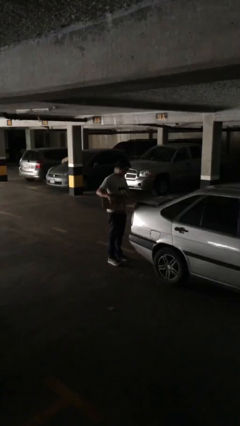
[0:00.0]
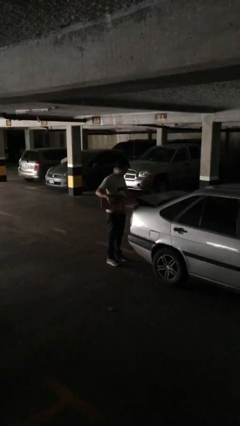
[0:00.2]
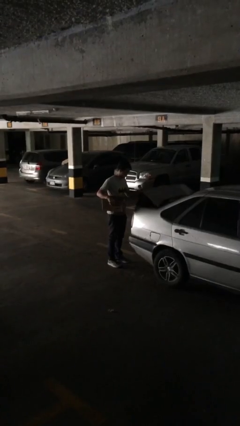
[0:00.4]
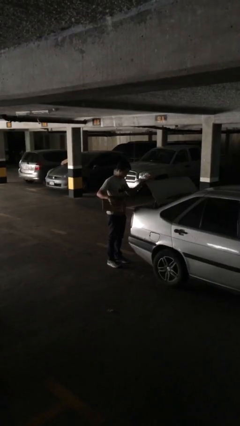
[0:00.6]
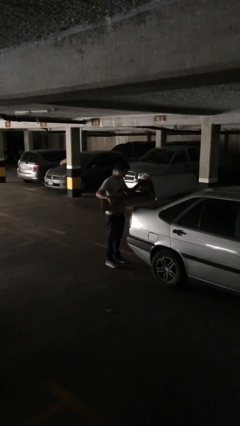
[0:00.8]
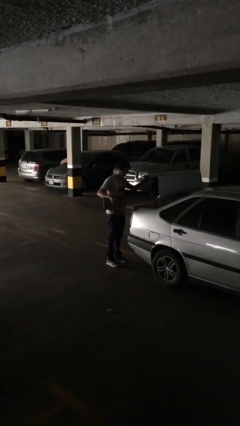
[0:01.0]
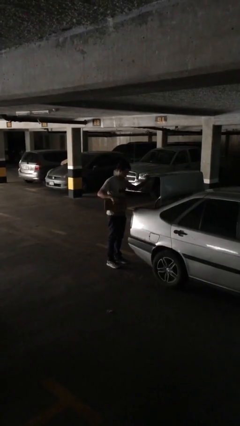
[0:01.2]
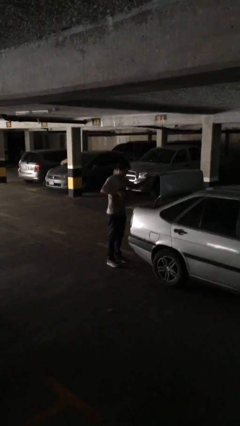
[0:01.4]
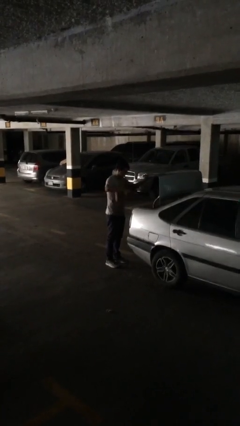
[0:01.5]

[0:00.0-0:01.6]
person opens car trunk

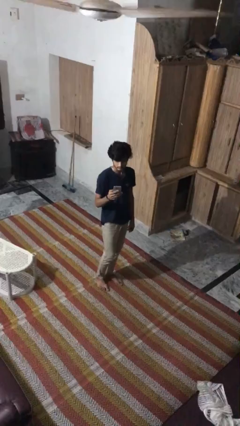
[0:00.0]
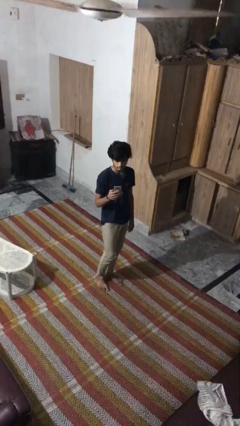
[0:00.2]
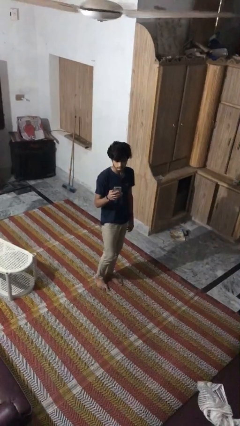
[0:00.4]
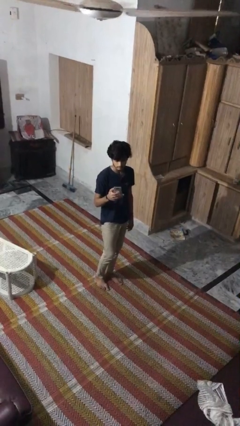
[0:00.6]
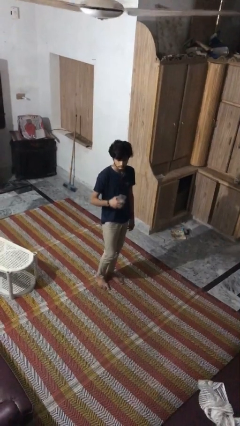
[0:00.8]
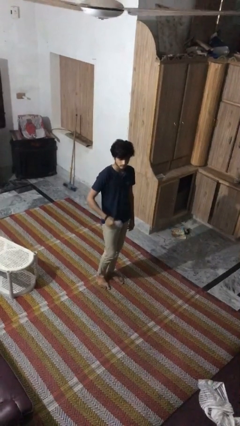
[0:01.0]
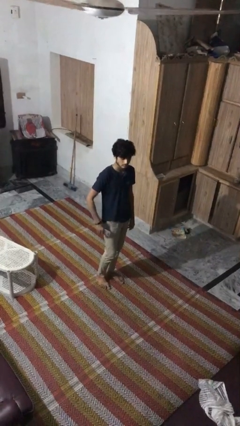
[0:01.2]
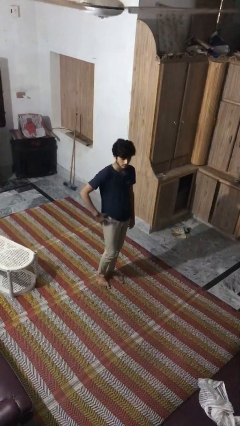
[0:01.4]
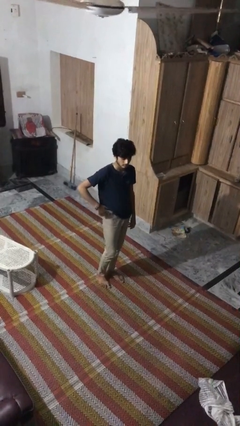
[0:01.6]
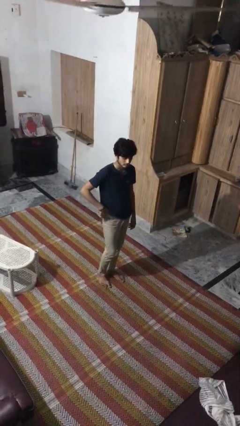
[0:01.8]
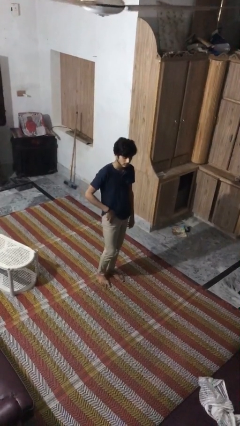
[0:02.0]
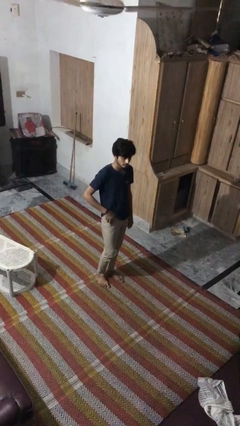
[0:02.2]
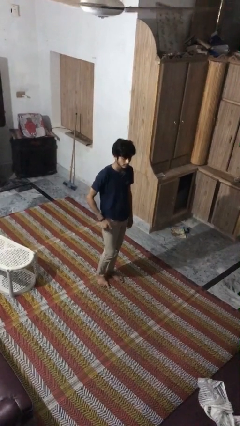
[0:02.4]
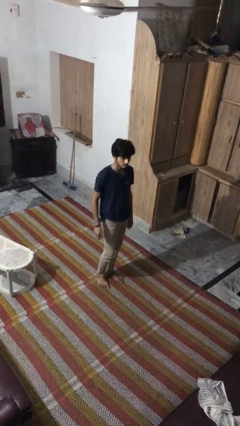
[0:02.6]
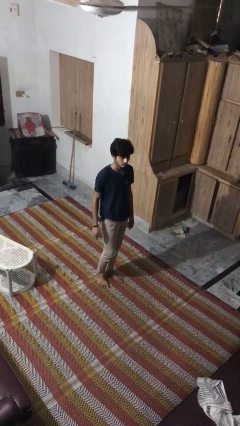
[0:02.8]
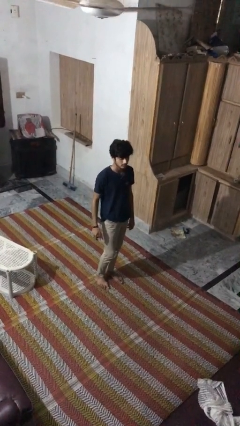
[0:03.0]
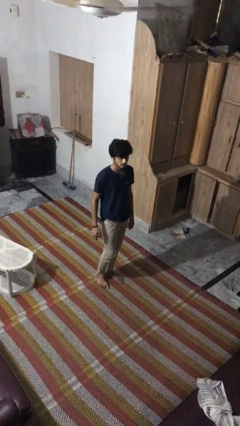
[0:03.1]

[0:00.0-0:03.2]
person puts phone into pocket

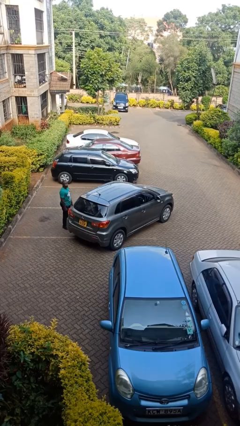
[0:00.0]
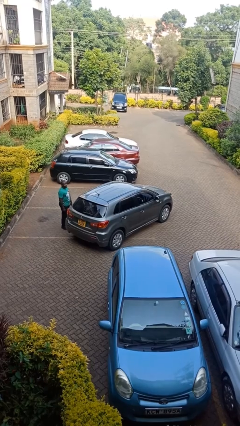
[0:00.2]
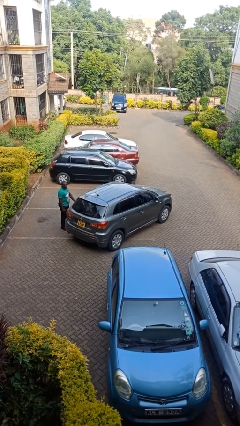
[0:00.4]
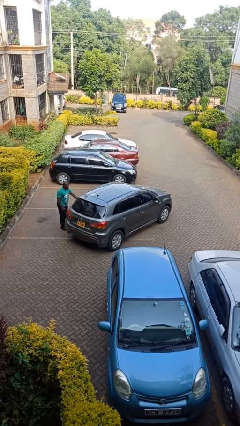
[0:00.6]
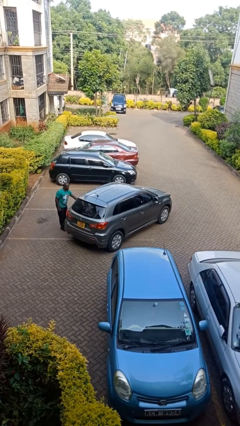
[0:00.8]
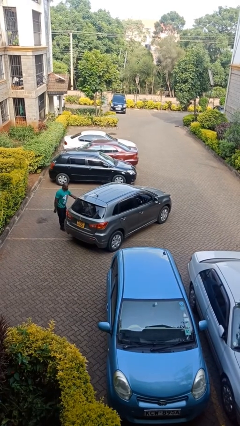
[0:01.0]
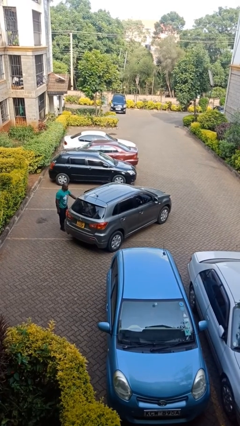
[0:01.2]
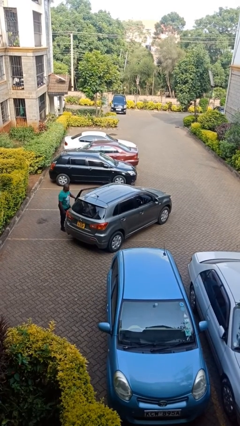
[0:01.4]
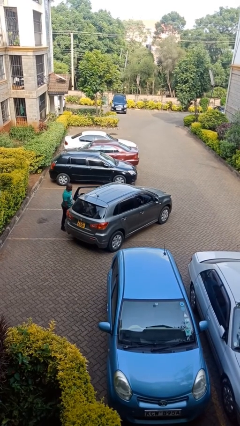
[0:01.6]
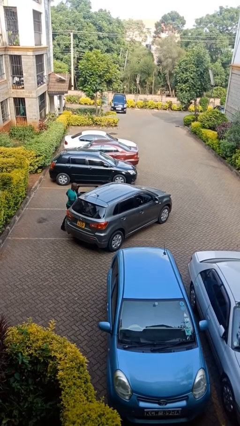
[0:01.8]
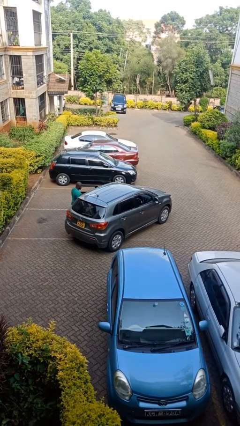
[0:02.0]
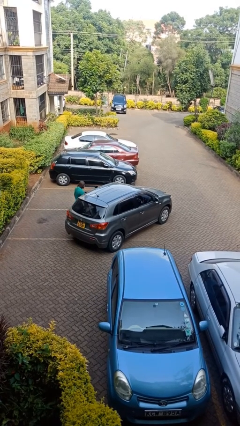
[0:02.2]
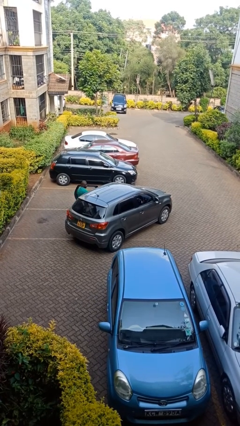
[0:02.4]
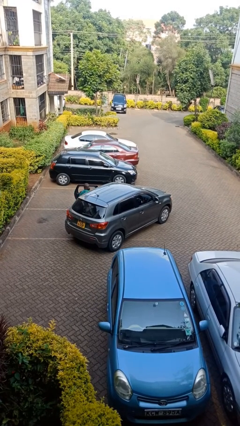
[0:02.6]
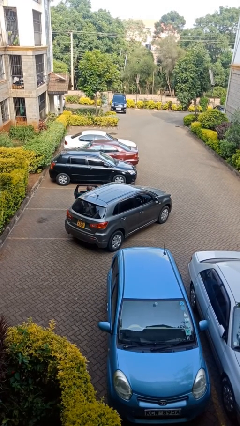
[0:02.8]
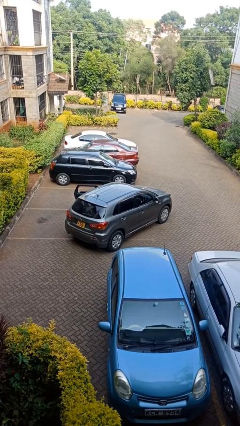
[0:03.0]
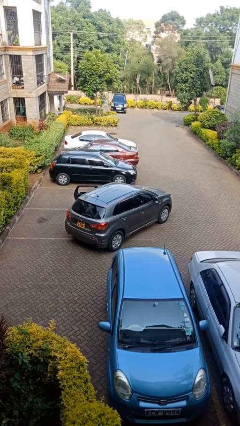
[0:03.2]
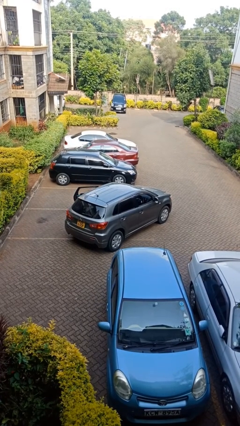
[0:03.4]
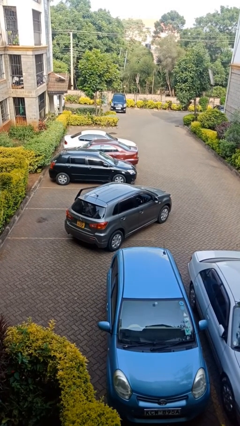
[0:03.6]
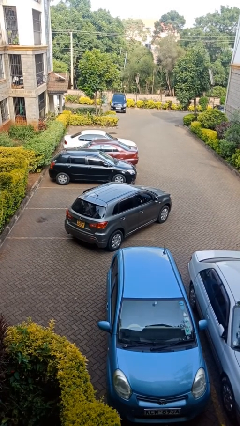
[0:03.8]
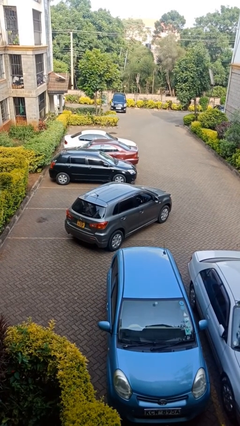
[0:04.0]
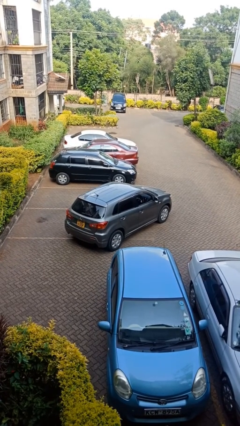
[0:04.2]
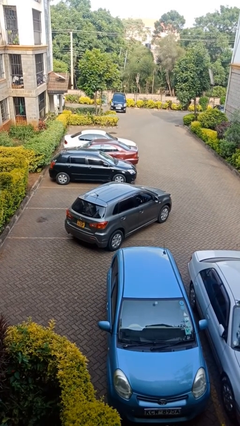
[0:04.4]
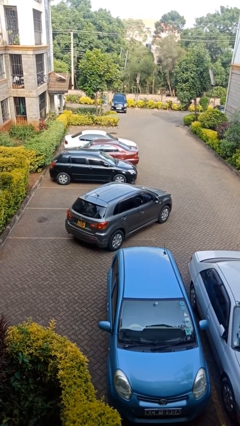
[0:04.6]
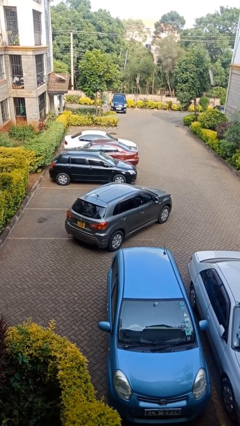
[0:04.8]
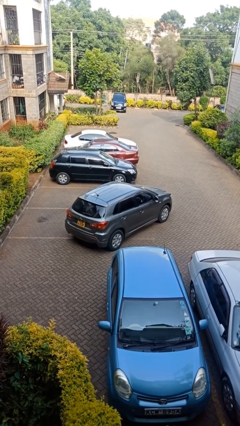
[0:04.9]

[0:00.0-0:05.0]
car picks up person

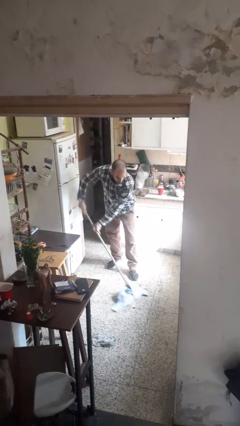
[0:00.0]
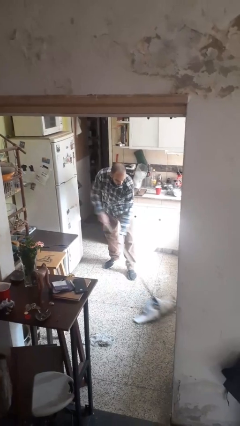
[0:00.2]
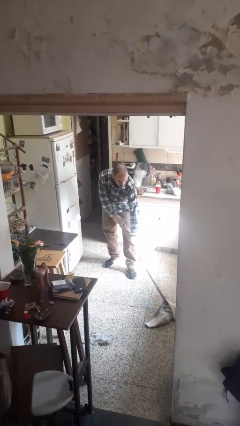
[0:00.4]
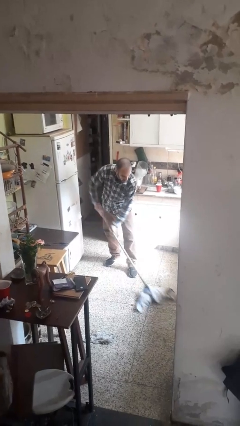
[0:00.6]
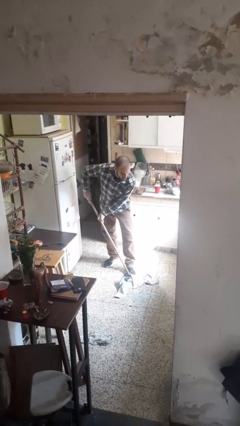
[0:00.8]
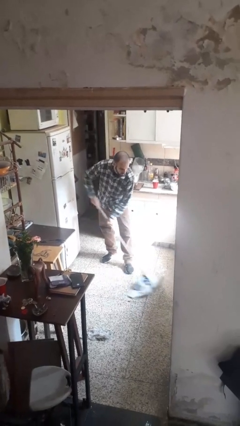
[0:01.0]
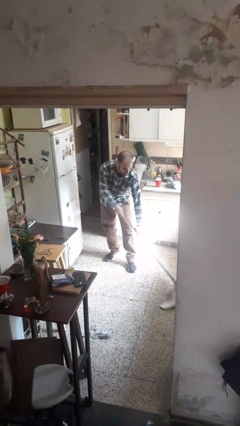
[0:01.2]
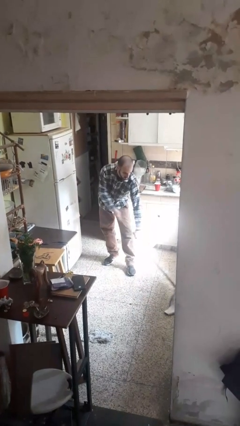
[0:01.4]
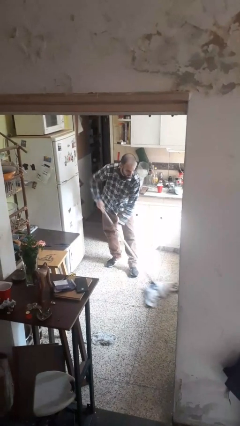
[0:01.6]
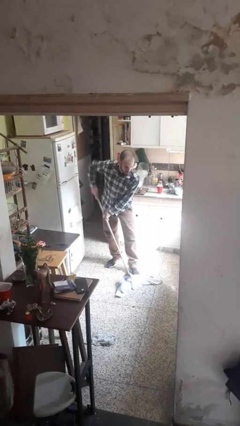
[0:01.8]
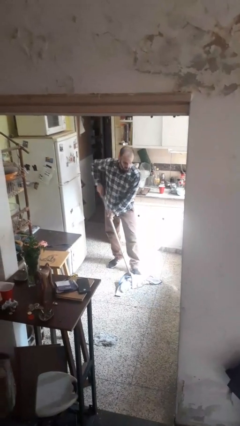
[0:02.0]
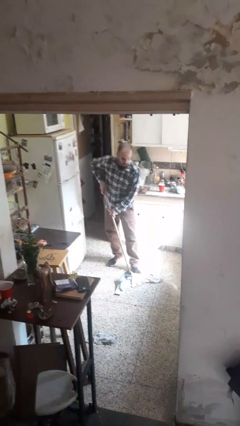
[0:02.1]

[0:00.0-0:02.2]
person mops

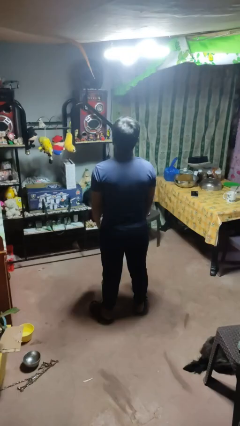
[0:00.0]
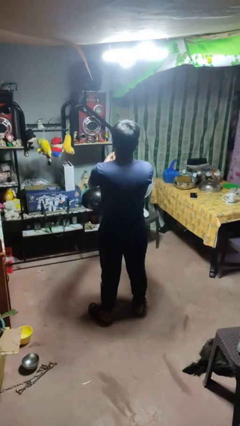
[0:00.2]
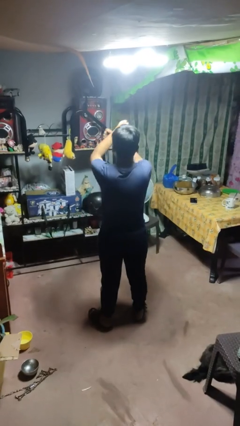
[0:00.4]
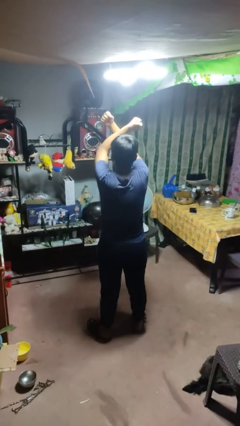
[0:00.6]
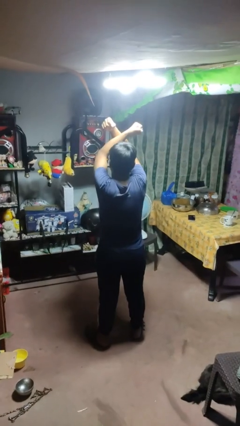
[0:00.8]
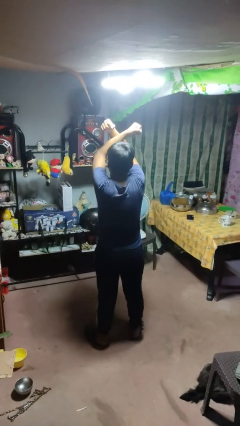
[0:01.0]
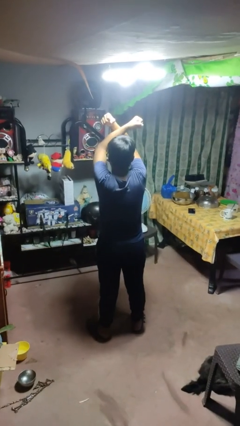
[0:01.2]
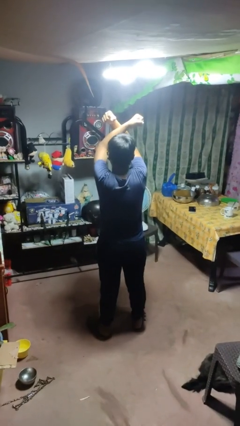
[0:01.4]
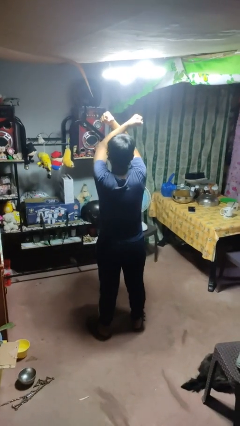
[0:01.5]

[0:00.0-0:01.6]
person gestures arms x

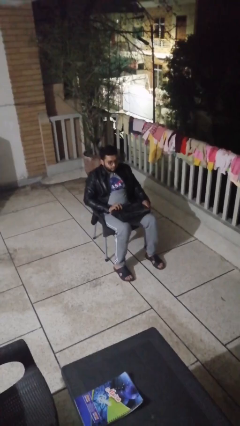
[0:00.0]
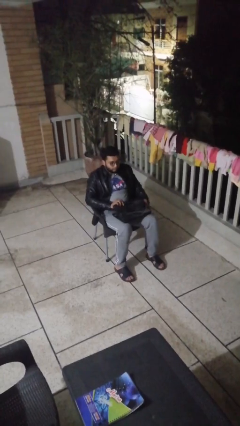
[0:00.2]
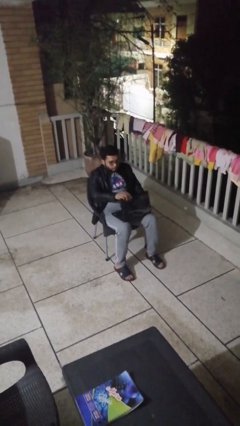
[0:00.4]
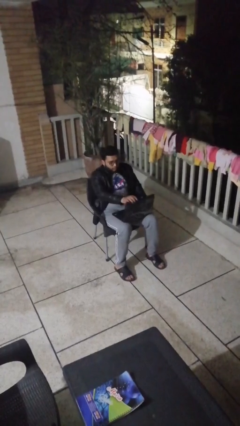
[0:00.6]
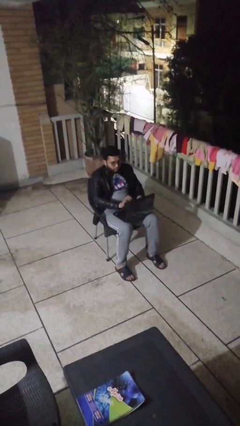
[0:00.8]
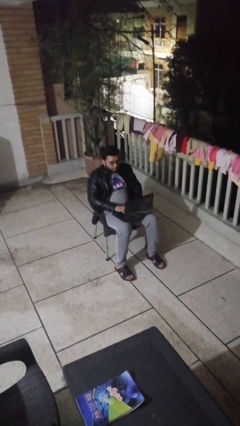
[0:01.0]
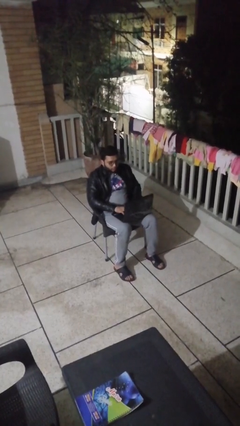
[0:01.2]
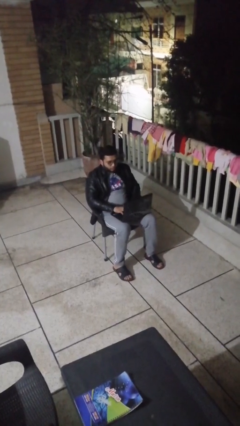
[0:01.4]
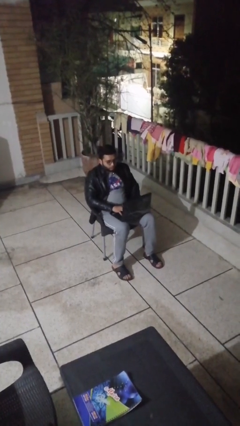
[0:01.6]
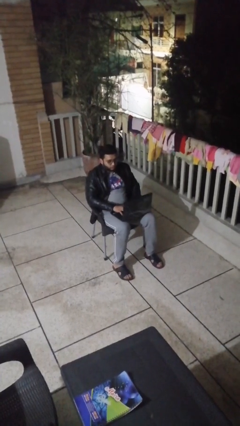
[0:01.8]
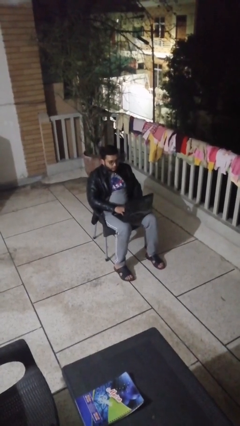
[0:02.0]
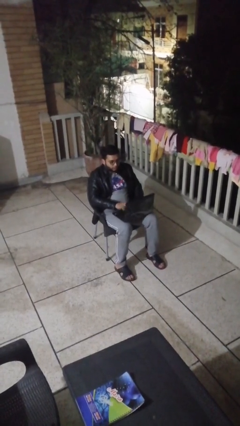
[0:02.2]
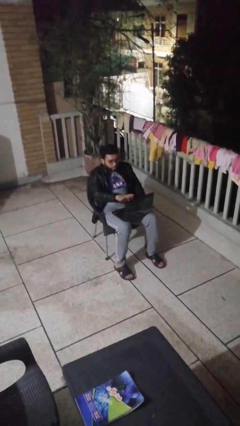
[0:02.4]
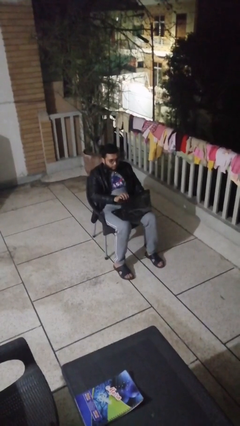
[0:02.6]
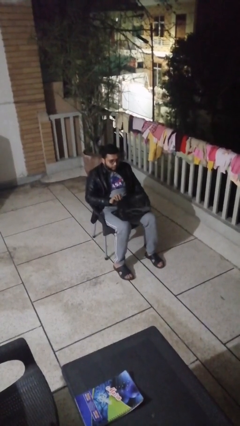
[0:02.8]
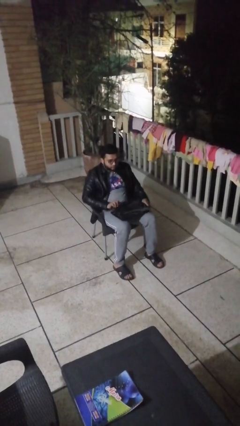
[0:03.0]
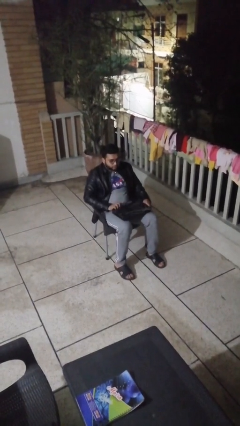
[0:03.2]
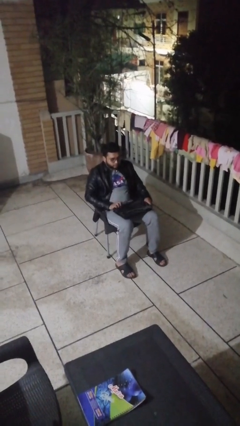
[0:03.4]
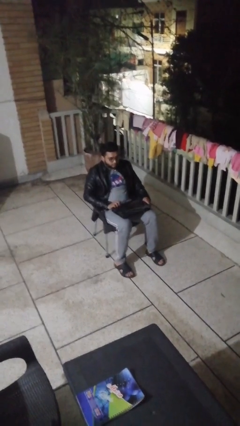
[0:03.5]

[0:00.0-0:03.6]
person interacts with laptop
